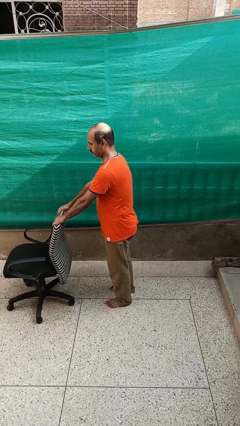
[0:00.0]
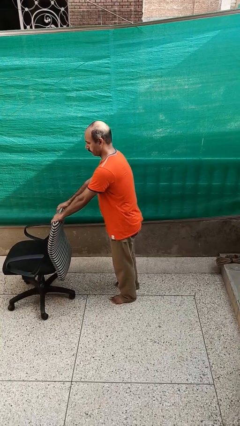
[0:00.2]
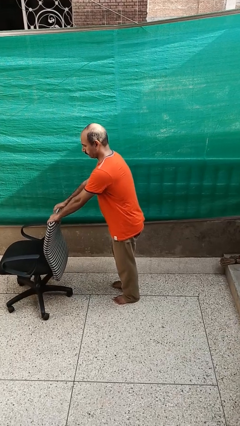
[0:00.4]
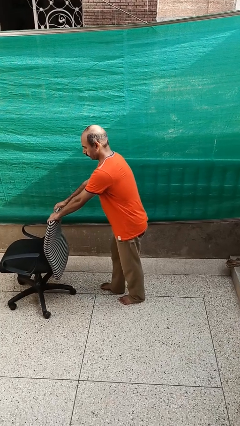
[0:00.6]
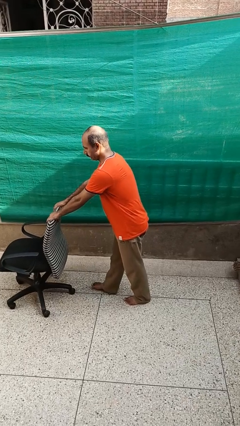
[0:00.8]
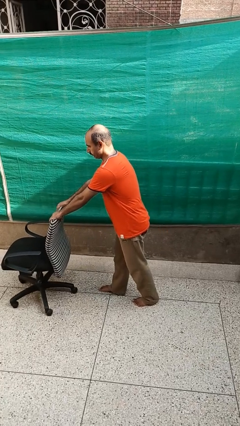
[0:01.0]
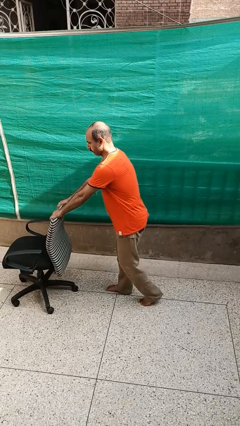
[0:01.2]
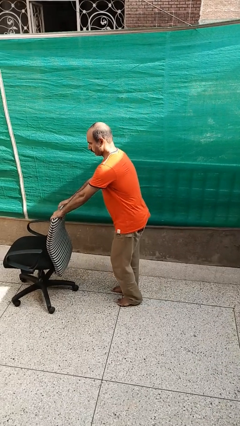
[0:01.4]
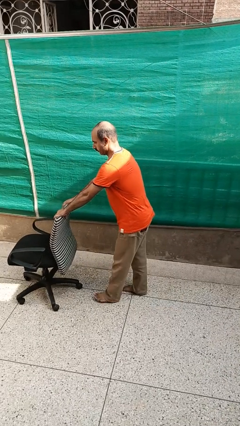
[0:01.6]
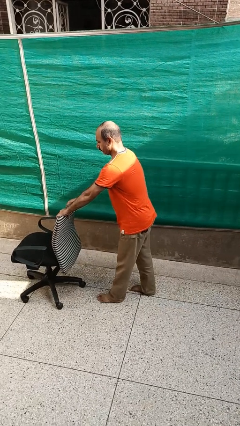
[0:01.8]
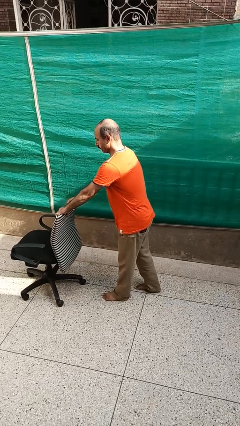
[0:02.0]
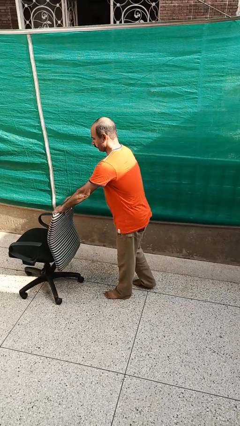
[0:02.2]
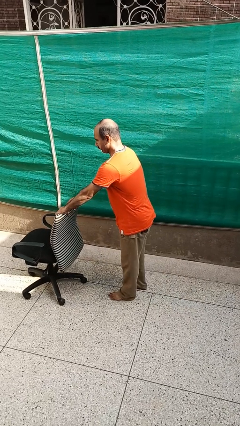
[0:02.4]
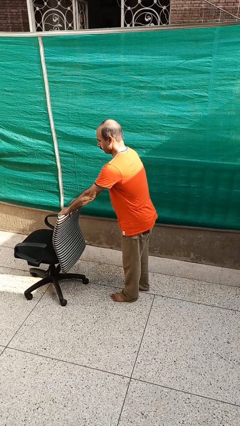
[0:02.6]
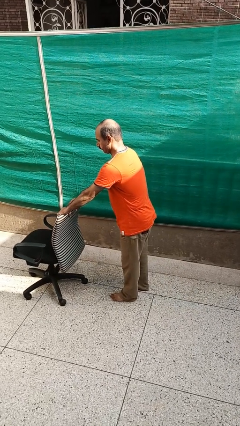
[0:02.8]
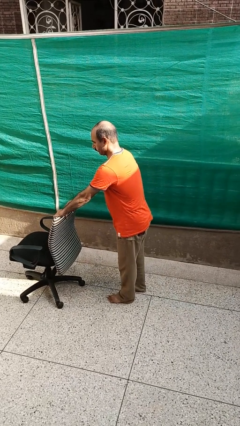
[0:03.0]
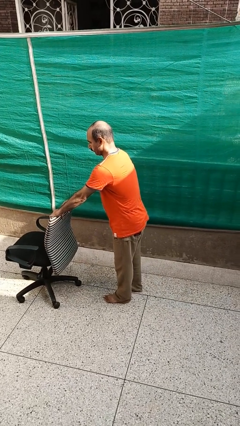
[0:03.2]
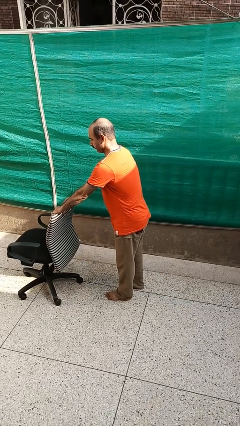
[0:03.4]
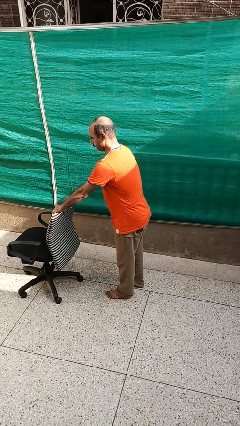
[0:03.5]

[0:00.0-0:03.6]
person pushes wheeled cart

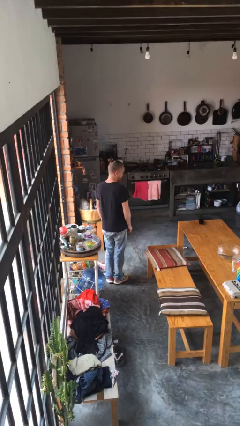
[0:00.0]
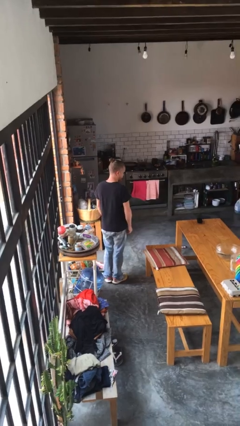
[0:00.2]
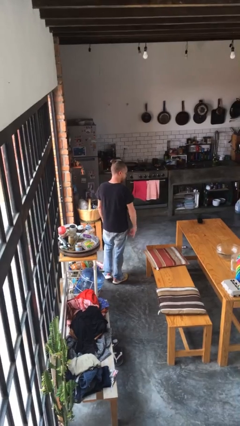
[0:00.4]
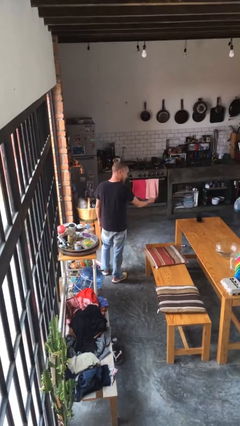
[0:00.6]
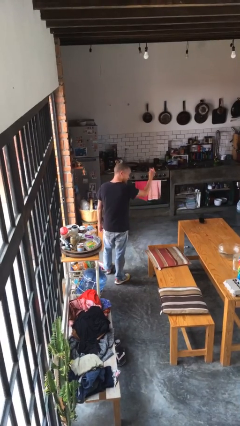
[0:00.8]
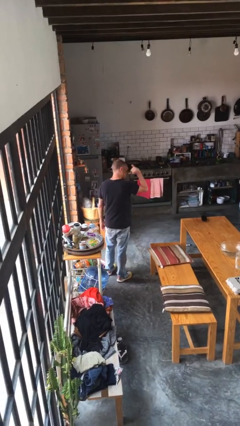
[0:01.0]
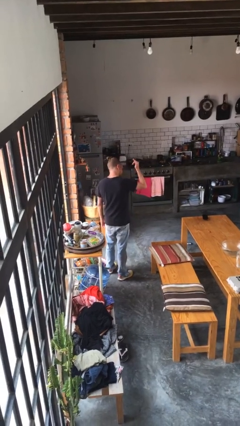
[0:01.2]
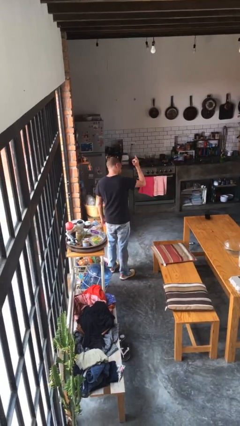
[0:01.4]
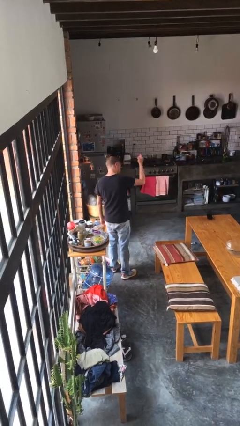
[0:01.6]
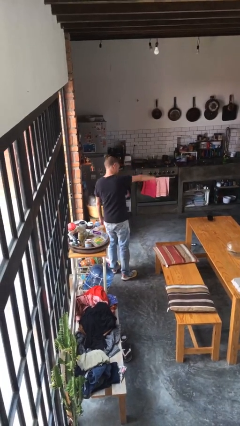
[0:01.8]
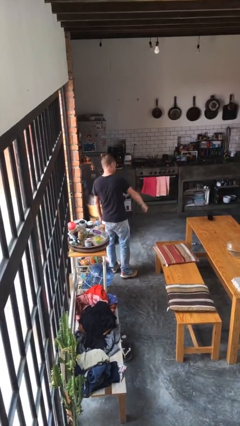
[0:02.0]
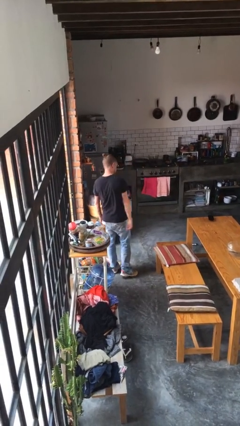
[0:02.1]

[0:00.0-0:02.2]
person gestures hang loose

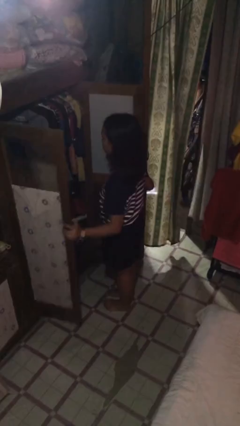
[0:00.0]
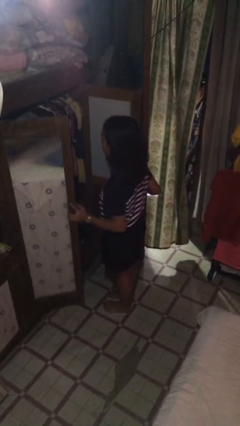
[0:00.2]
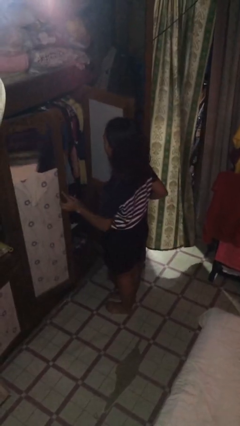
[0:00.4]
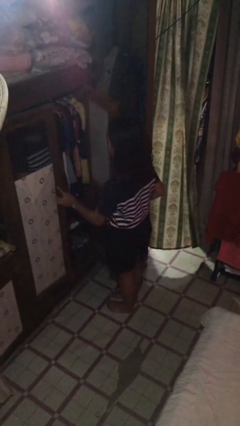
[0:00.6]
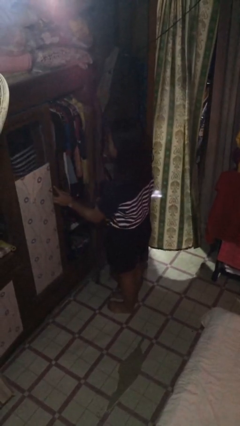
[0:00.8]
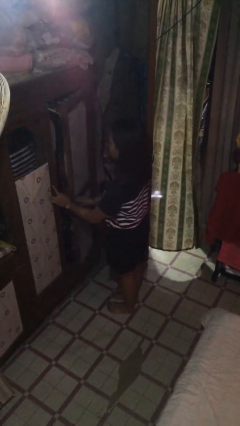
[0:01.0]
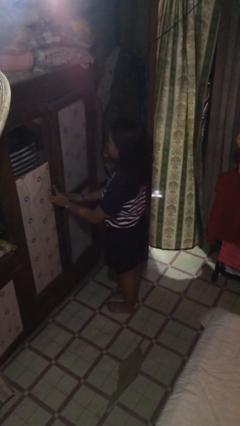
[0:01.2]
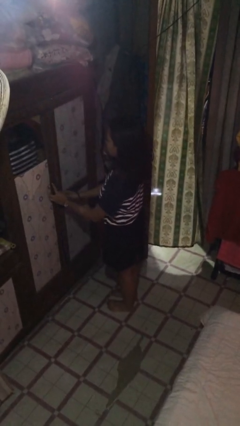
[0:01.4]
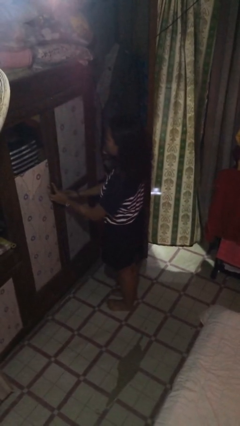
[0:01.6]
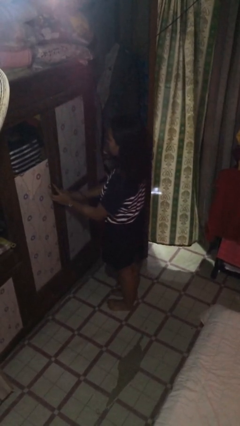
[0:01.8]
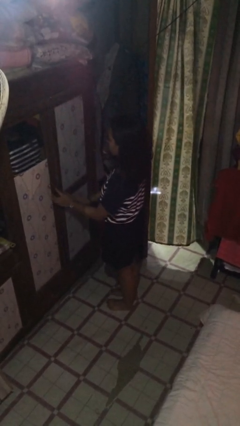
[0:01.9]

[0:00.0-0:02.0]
person closes closet door

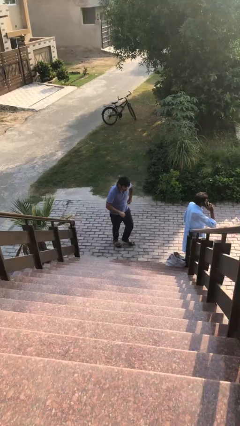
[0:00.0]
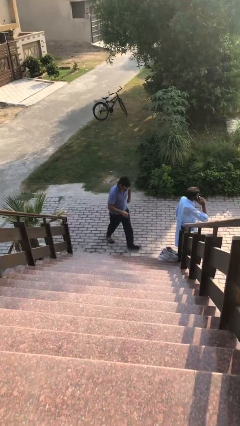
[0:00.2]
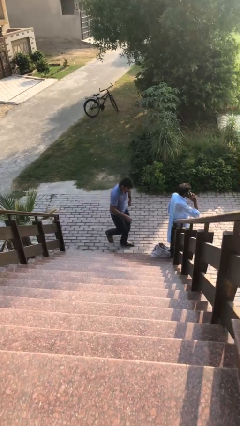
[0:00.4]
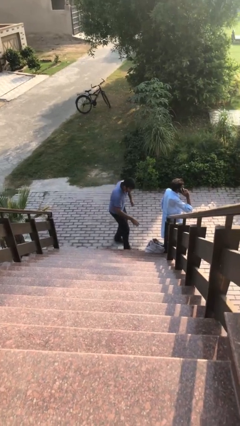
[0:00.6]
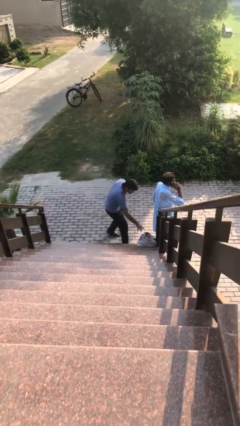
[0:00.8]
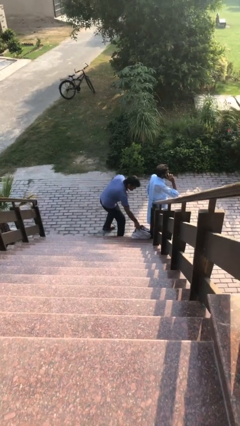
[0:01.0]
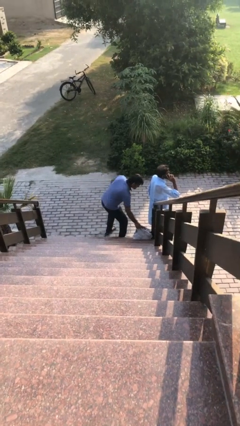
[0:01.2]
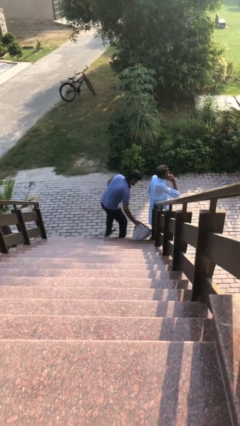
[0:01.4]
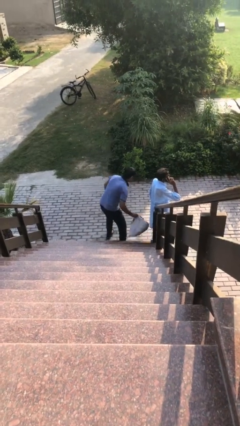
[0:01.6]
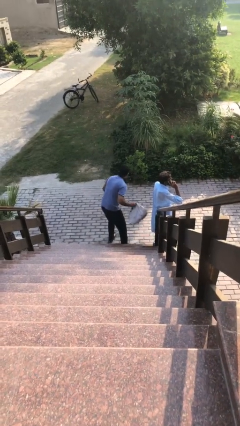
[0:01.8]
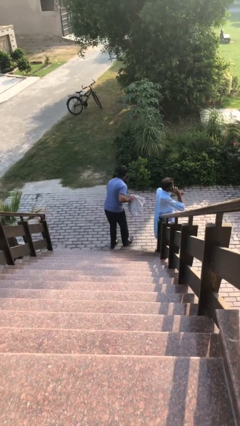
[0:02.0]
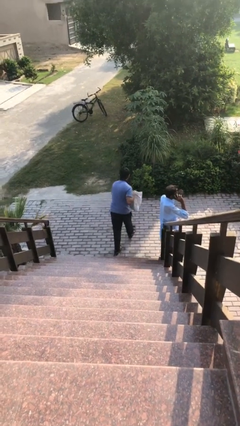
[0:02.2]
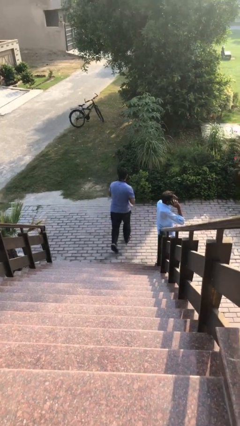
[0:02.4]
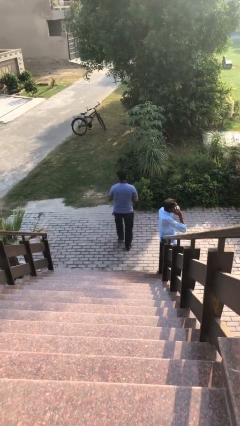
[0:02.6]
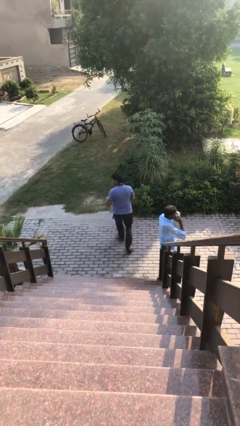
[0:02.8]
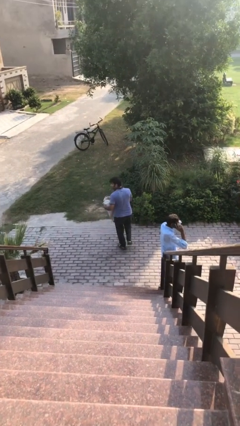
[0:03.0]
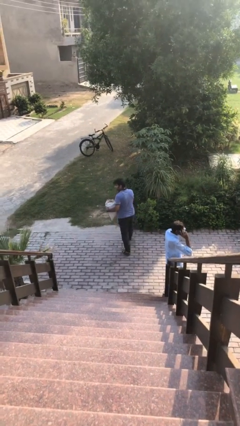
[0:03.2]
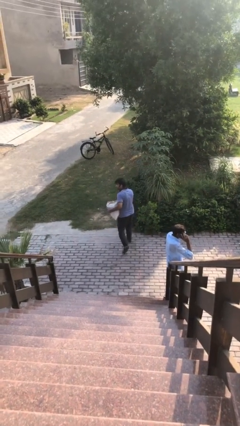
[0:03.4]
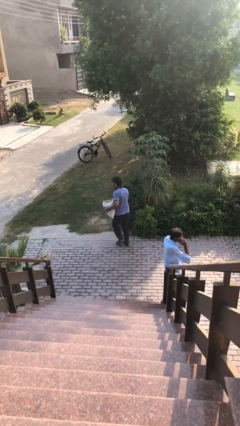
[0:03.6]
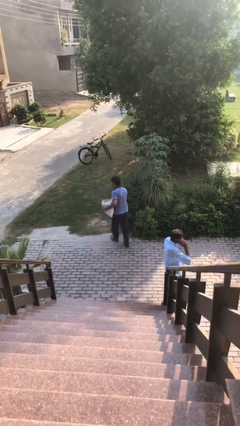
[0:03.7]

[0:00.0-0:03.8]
person steals object from person

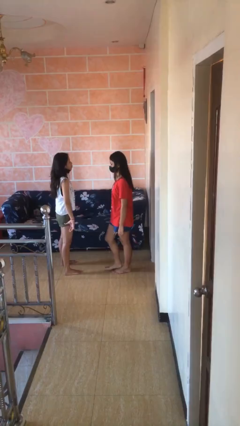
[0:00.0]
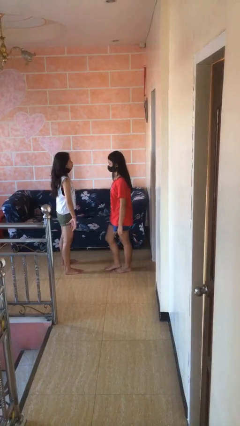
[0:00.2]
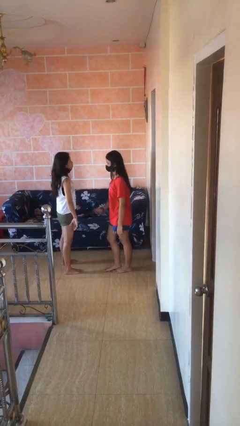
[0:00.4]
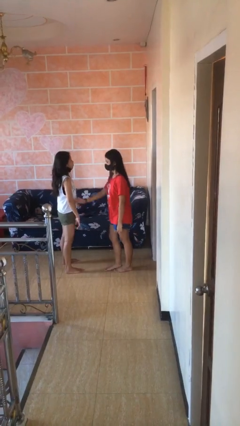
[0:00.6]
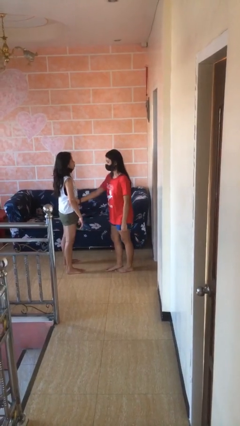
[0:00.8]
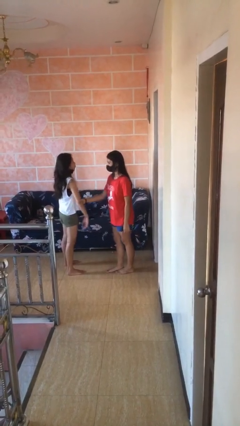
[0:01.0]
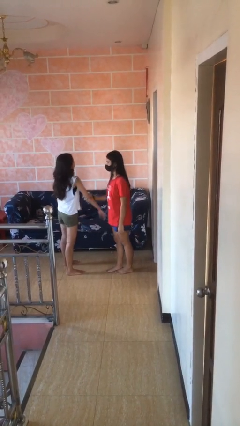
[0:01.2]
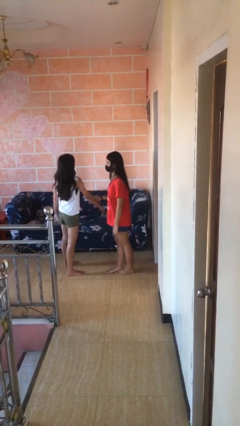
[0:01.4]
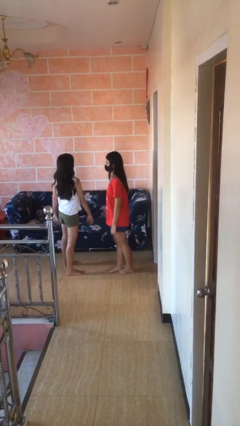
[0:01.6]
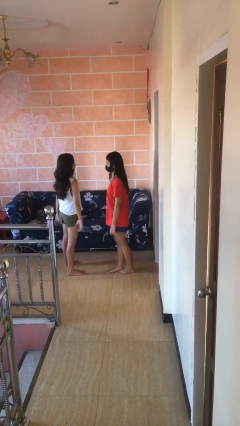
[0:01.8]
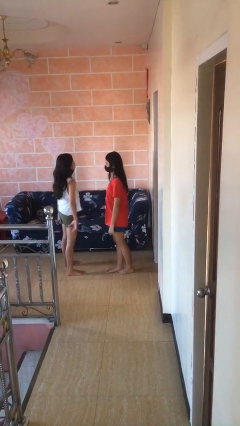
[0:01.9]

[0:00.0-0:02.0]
person grabs person by forearm

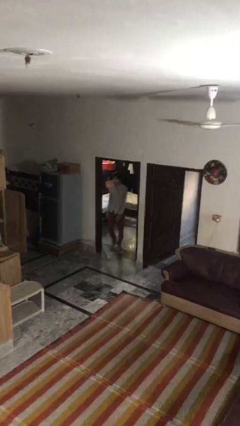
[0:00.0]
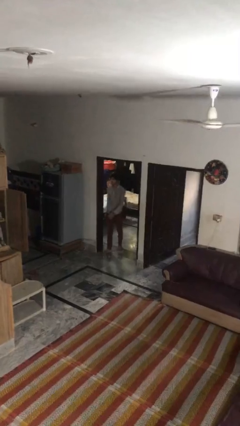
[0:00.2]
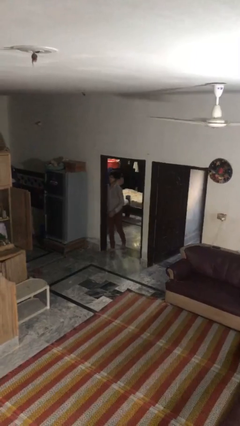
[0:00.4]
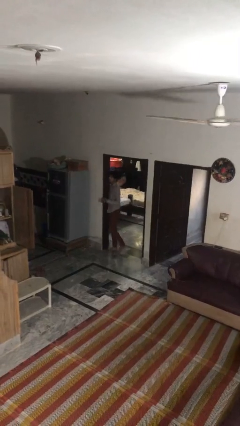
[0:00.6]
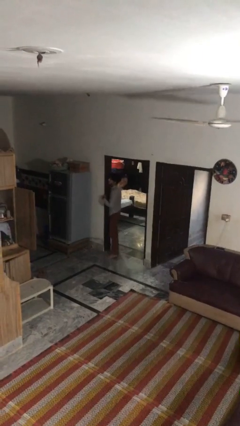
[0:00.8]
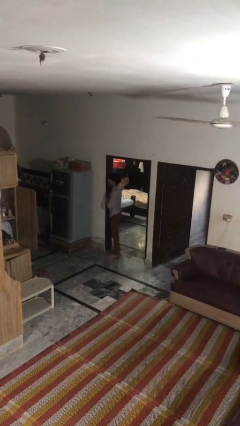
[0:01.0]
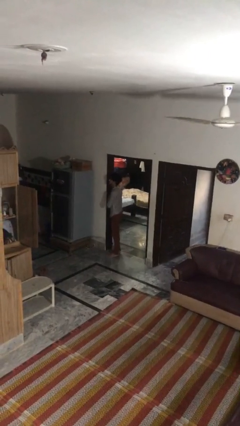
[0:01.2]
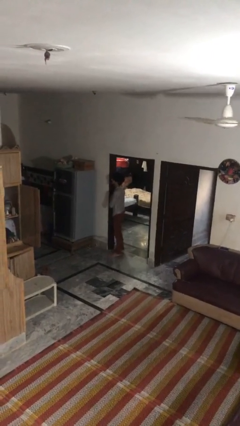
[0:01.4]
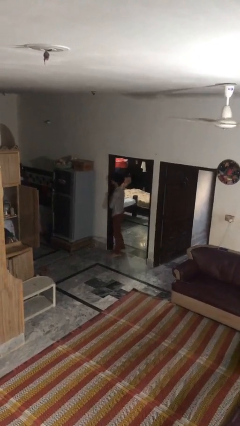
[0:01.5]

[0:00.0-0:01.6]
person bumps into wall

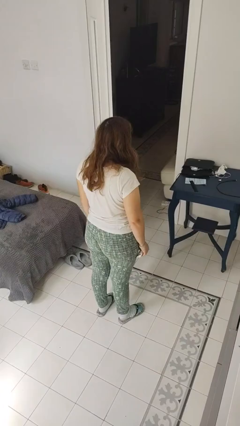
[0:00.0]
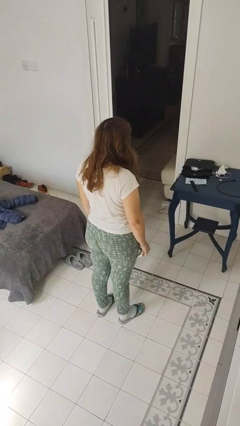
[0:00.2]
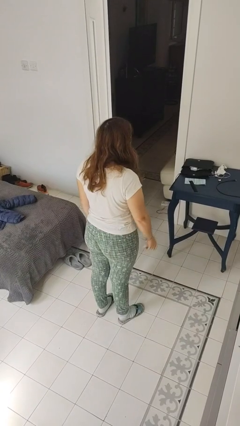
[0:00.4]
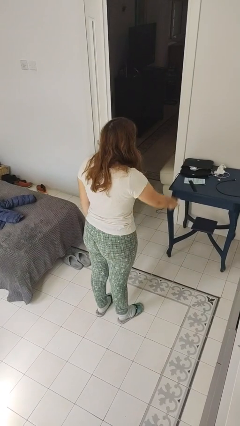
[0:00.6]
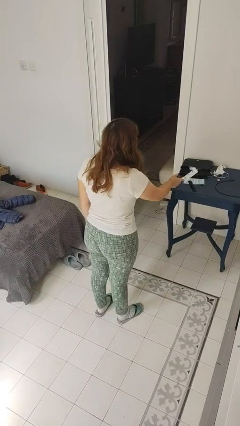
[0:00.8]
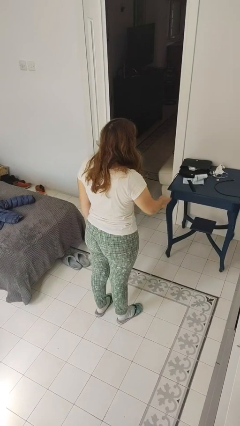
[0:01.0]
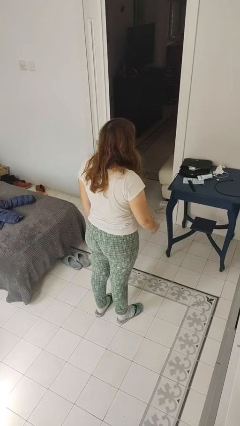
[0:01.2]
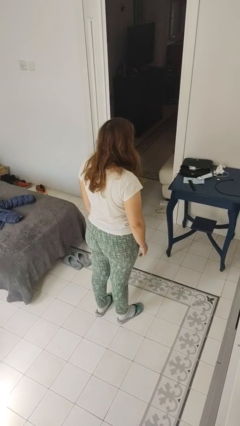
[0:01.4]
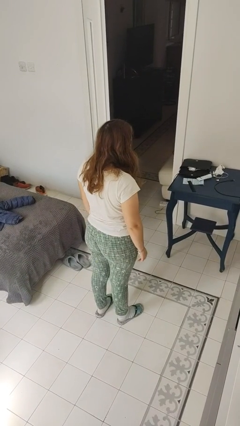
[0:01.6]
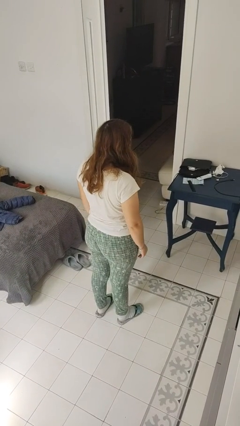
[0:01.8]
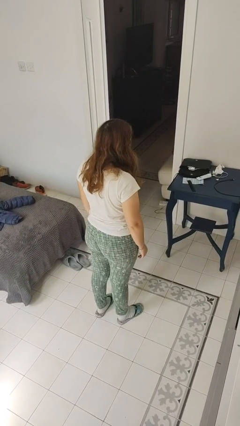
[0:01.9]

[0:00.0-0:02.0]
person throws object on table
